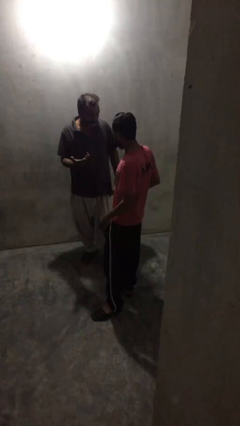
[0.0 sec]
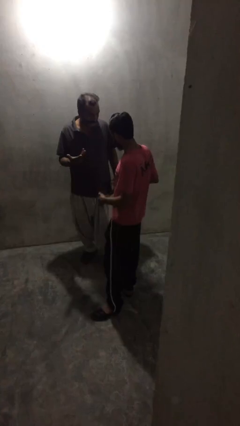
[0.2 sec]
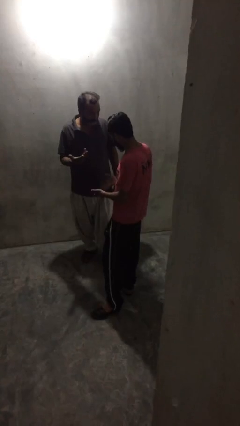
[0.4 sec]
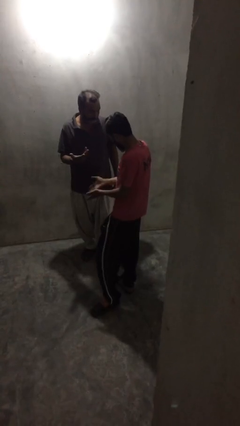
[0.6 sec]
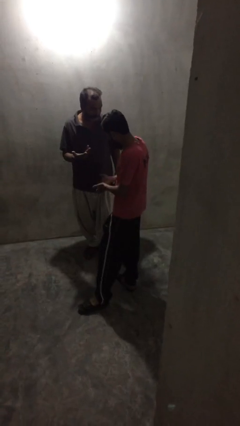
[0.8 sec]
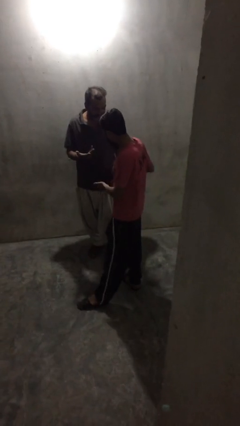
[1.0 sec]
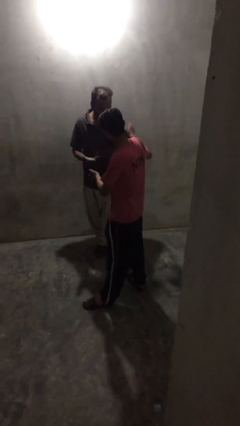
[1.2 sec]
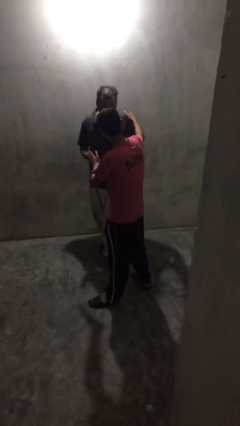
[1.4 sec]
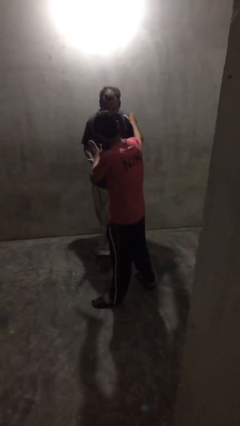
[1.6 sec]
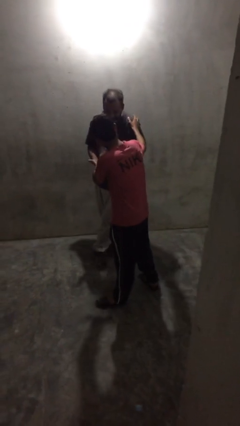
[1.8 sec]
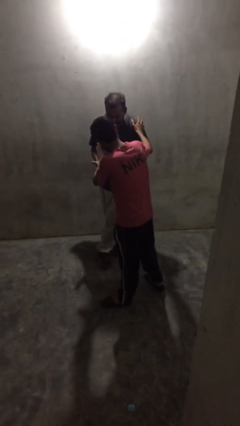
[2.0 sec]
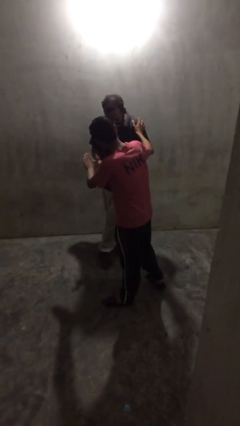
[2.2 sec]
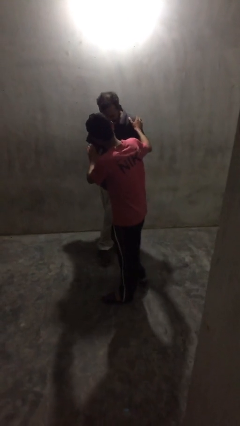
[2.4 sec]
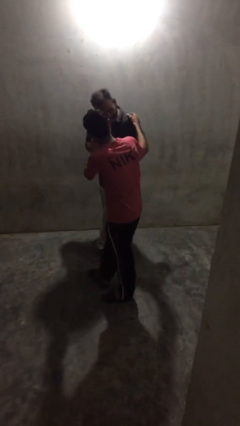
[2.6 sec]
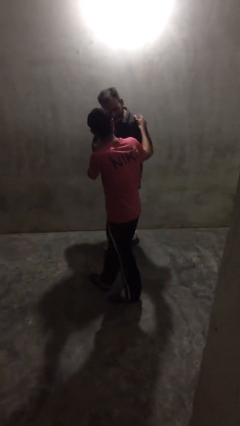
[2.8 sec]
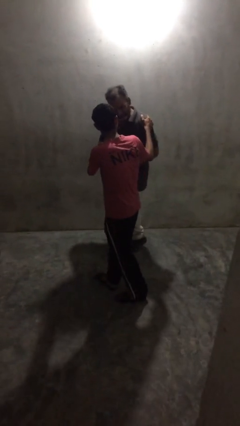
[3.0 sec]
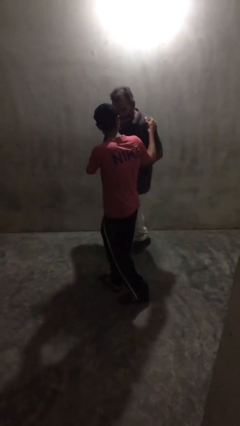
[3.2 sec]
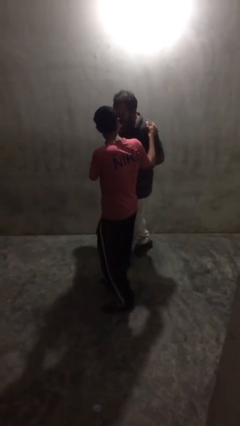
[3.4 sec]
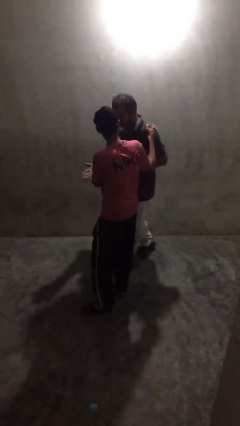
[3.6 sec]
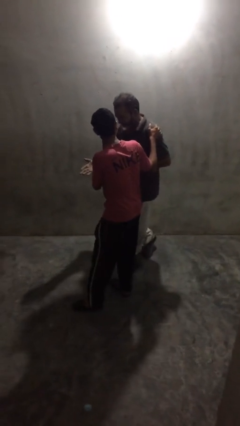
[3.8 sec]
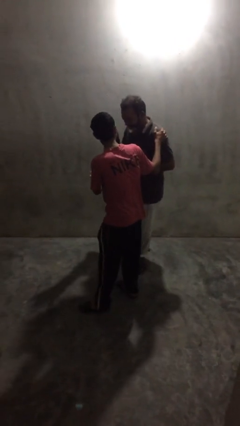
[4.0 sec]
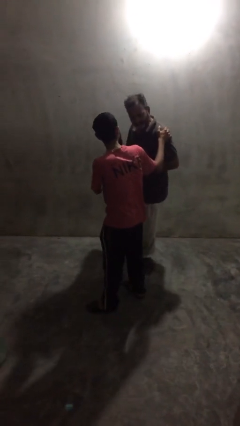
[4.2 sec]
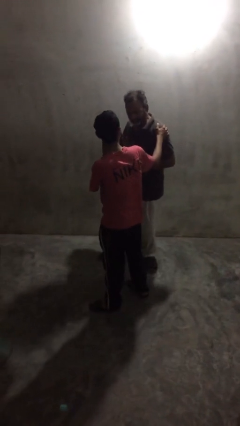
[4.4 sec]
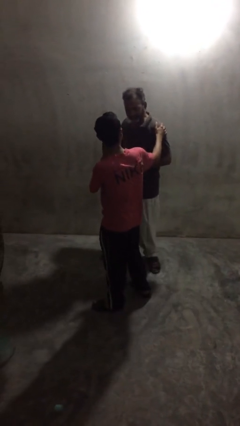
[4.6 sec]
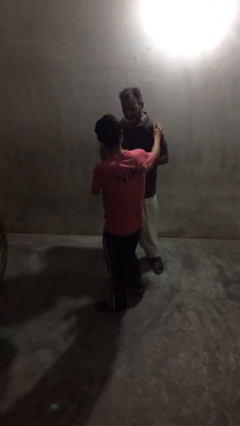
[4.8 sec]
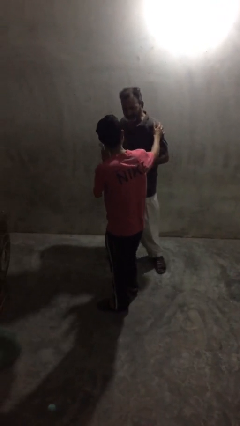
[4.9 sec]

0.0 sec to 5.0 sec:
person talks to person

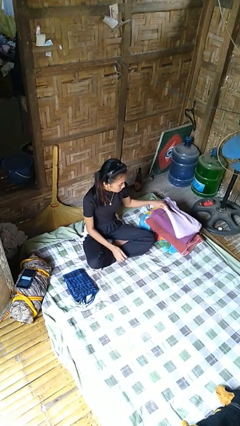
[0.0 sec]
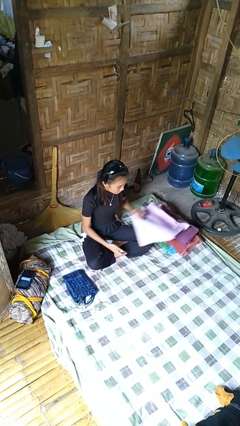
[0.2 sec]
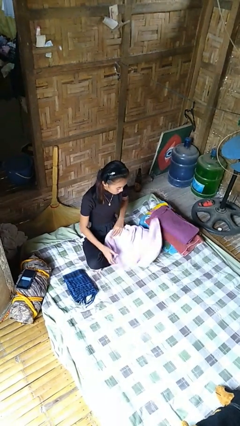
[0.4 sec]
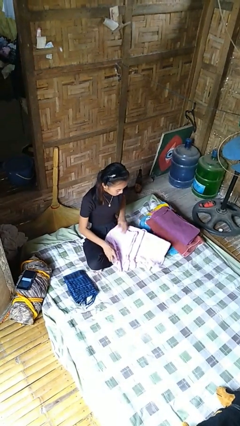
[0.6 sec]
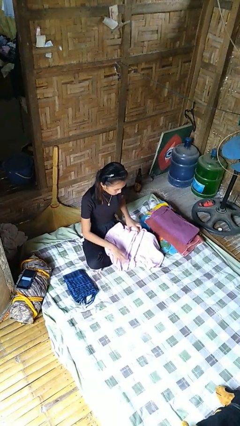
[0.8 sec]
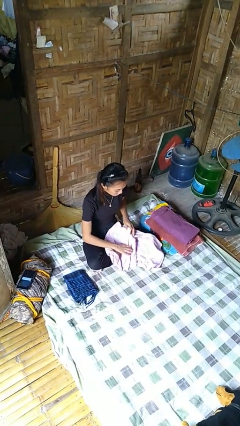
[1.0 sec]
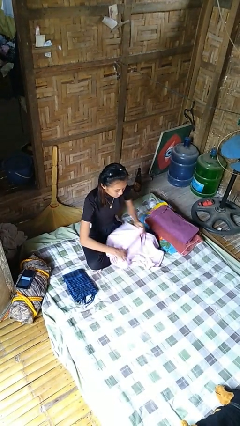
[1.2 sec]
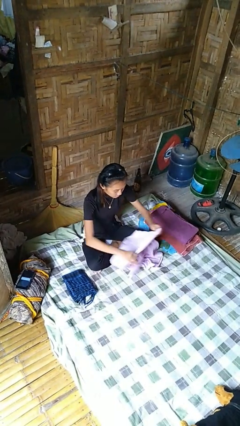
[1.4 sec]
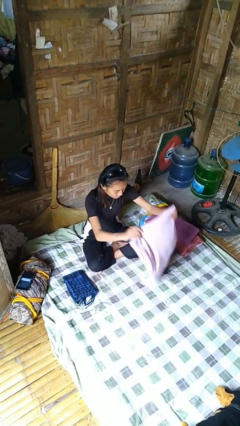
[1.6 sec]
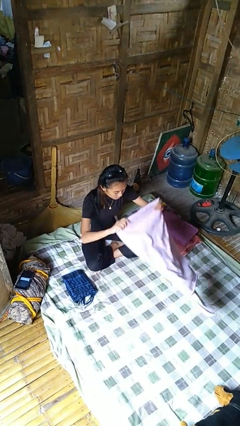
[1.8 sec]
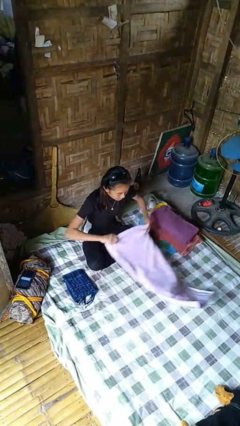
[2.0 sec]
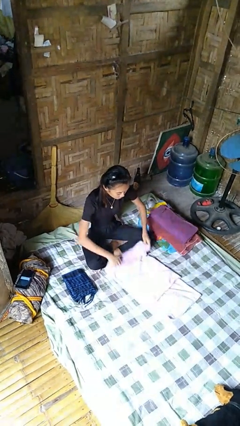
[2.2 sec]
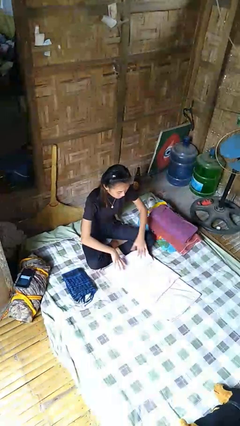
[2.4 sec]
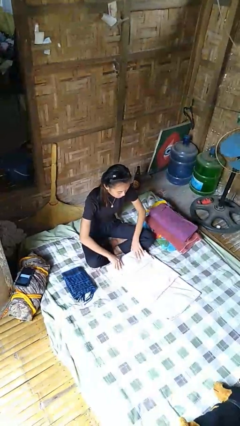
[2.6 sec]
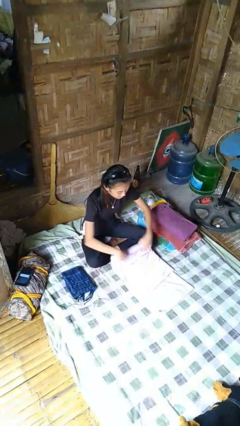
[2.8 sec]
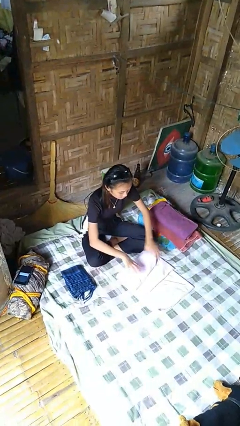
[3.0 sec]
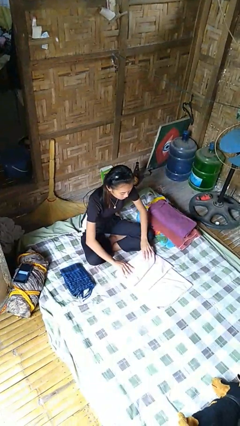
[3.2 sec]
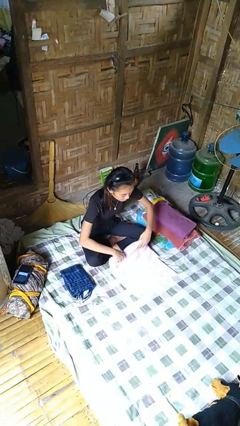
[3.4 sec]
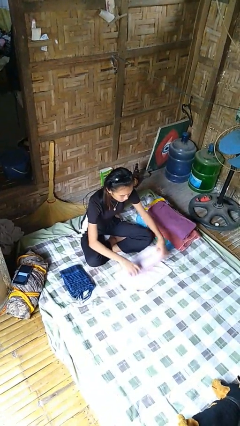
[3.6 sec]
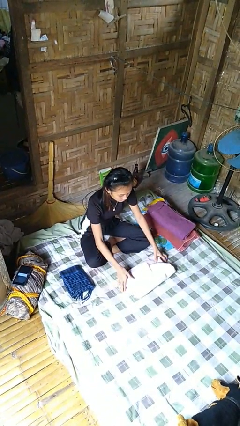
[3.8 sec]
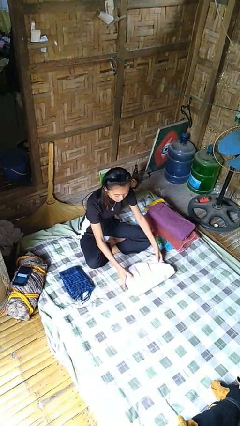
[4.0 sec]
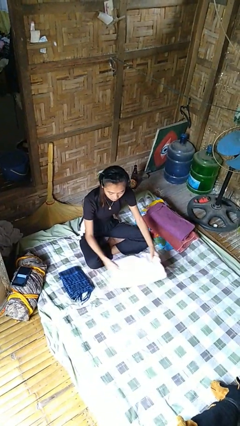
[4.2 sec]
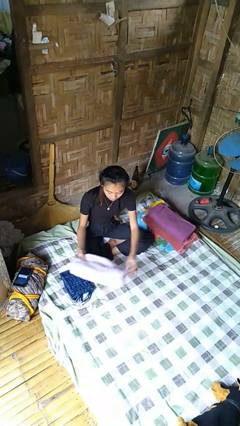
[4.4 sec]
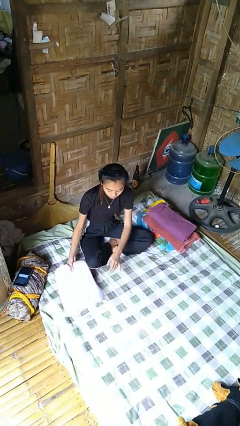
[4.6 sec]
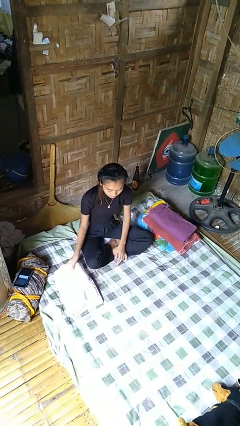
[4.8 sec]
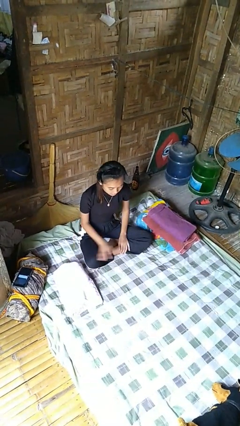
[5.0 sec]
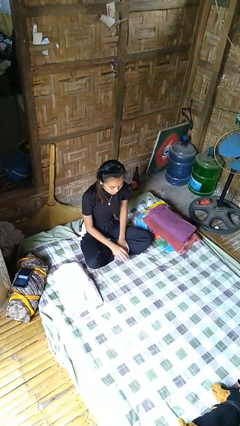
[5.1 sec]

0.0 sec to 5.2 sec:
person folds towel

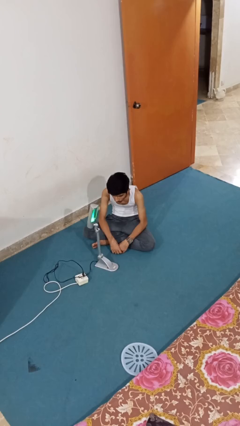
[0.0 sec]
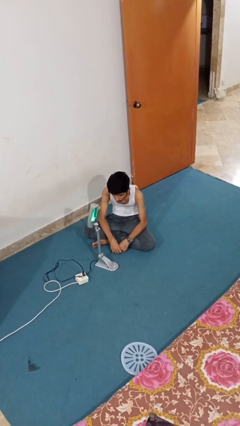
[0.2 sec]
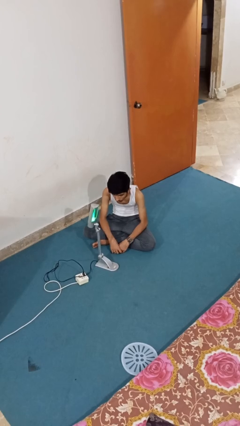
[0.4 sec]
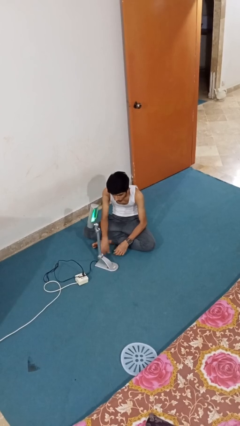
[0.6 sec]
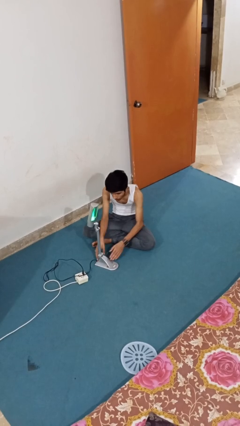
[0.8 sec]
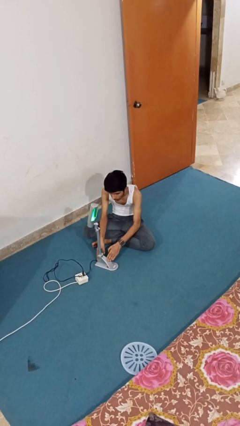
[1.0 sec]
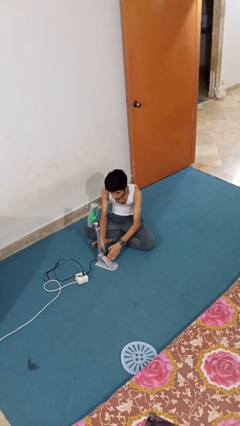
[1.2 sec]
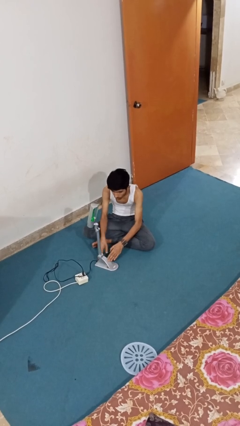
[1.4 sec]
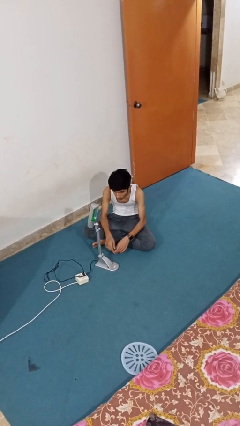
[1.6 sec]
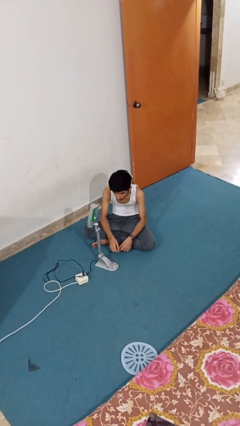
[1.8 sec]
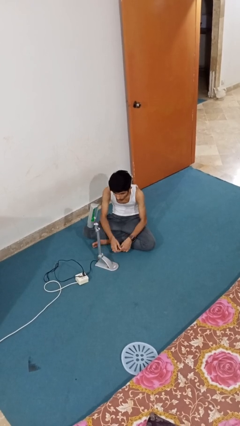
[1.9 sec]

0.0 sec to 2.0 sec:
person turns off lamp

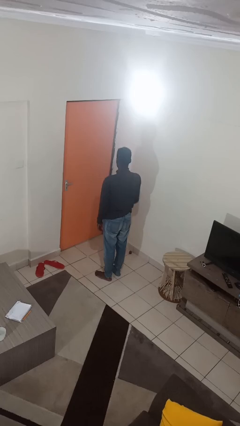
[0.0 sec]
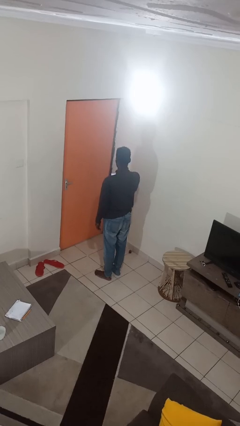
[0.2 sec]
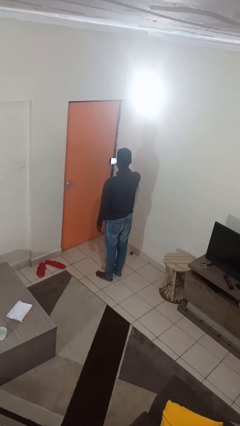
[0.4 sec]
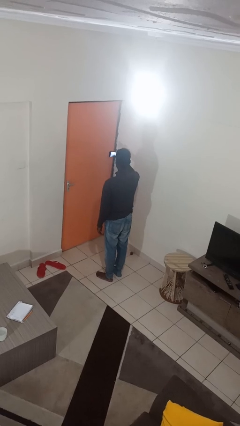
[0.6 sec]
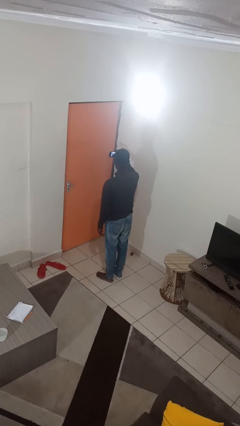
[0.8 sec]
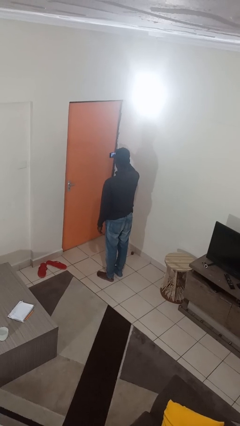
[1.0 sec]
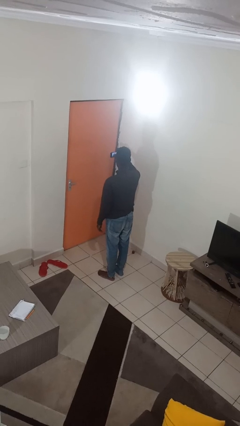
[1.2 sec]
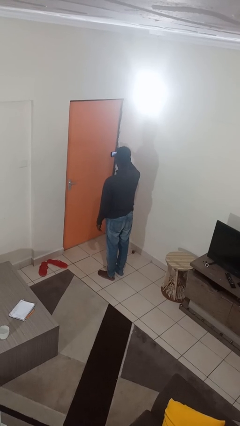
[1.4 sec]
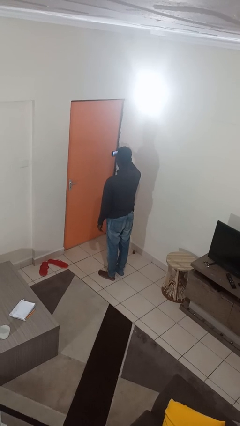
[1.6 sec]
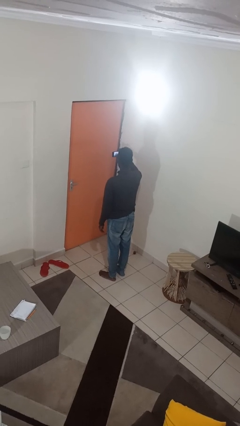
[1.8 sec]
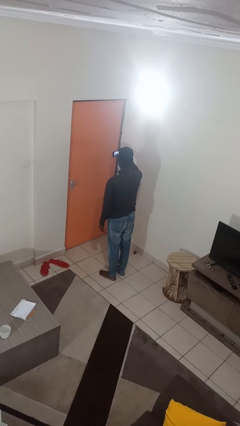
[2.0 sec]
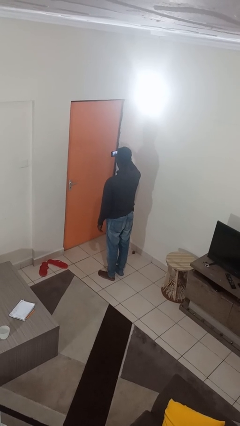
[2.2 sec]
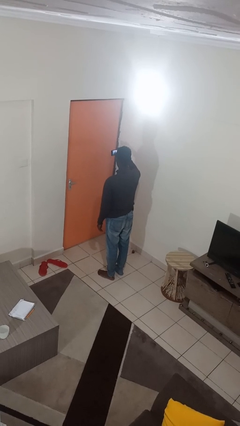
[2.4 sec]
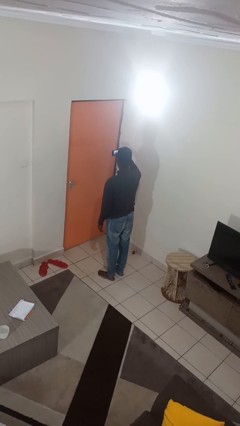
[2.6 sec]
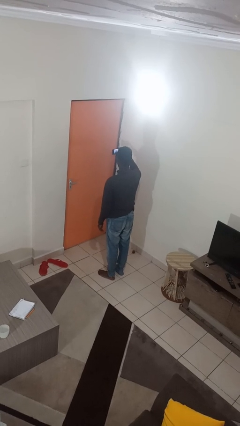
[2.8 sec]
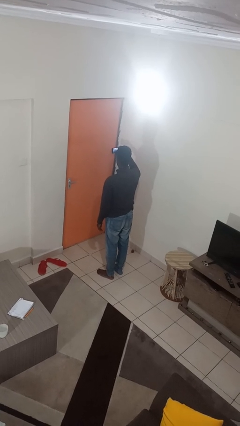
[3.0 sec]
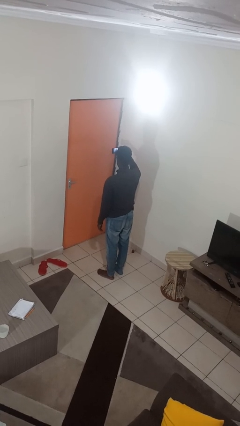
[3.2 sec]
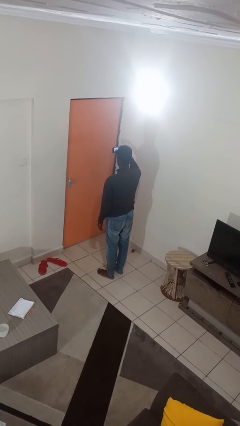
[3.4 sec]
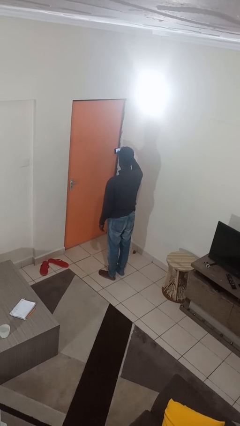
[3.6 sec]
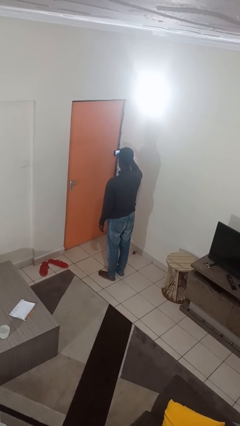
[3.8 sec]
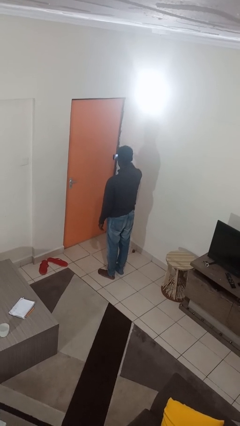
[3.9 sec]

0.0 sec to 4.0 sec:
person takes selfie

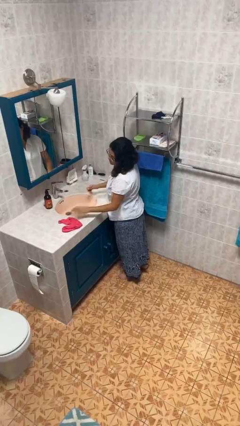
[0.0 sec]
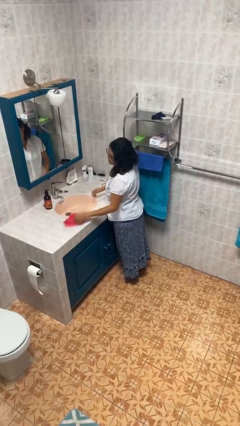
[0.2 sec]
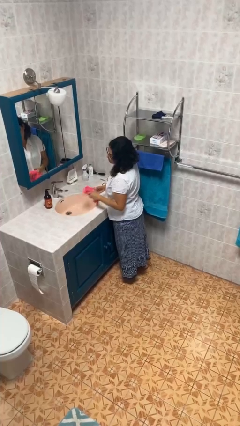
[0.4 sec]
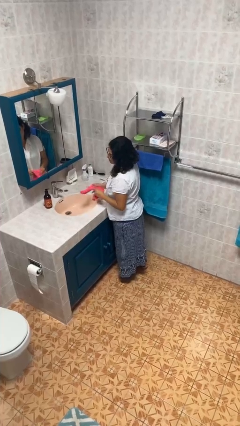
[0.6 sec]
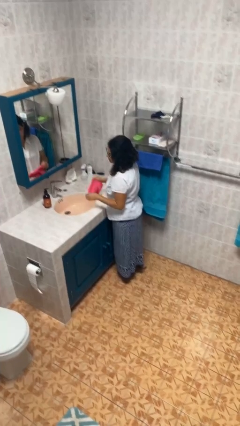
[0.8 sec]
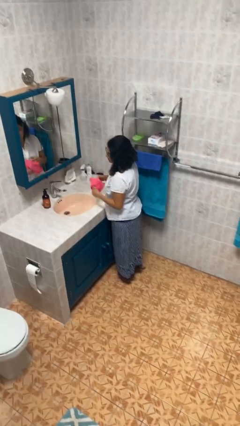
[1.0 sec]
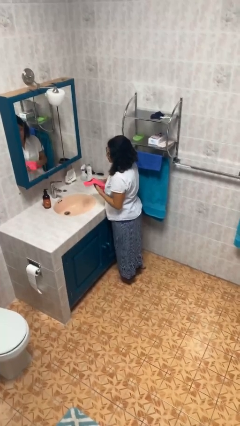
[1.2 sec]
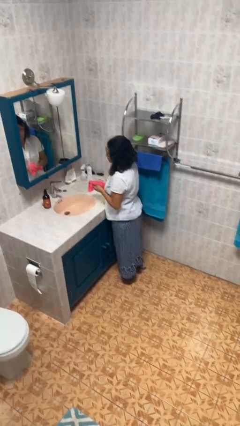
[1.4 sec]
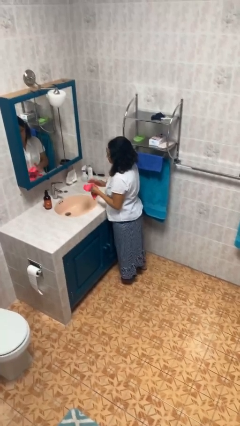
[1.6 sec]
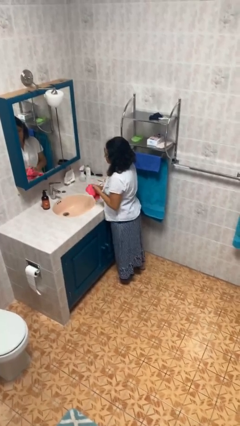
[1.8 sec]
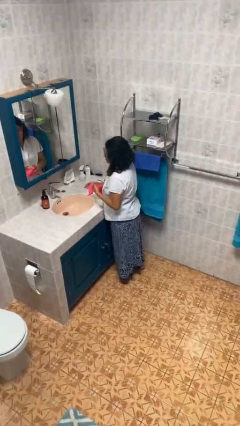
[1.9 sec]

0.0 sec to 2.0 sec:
person dries hands with towel
